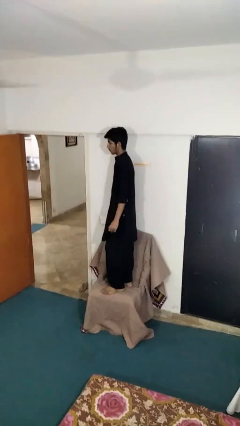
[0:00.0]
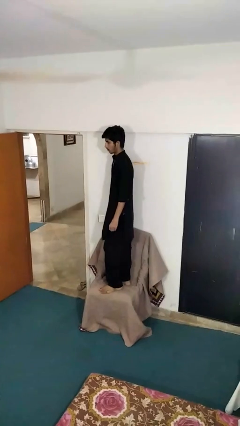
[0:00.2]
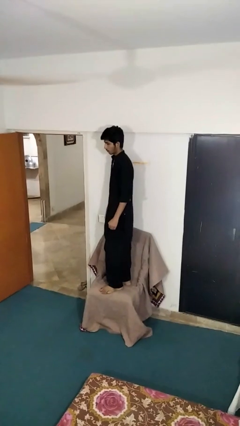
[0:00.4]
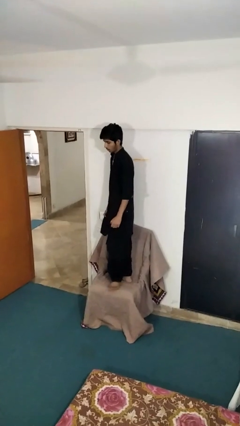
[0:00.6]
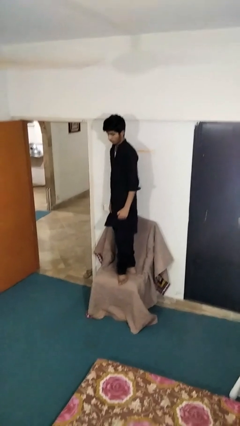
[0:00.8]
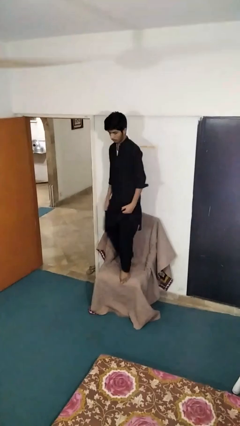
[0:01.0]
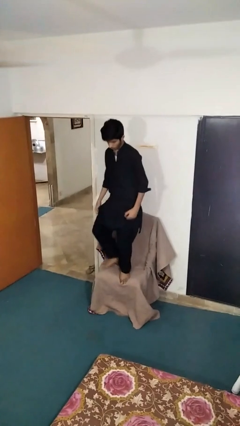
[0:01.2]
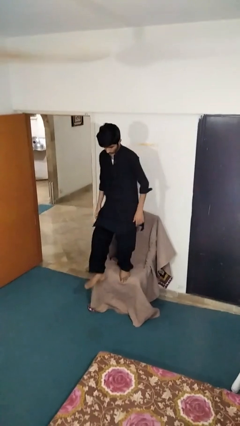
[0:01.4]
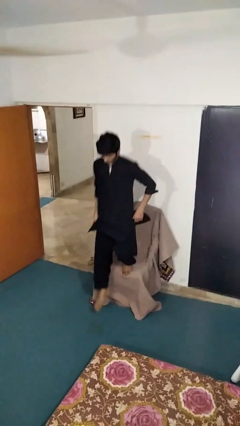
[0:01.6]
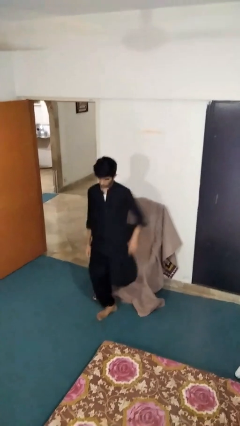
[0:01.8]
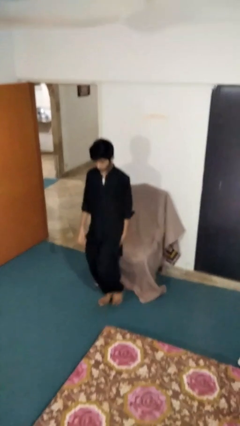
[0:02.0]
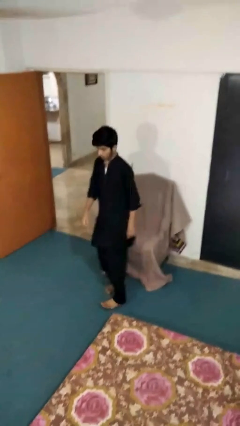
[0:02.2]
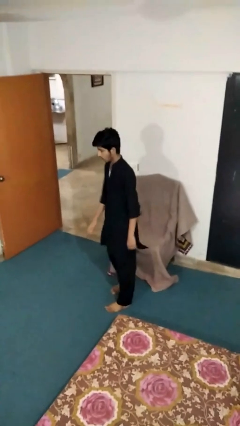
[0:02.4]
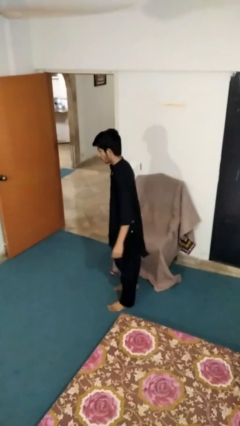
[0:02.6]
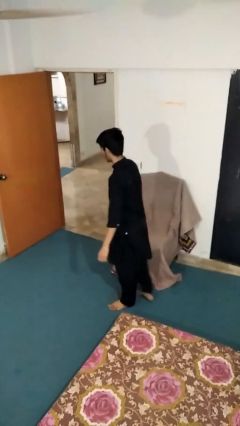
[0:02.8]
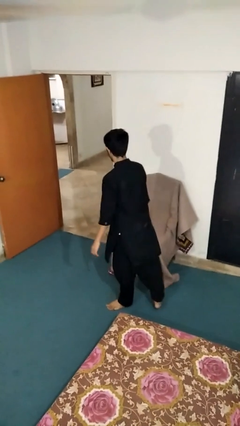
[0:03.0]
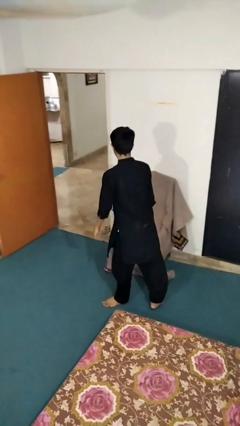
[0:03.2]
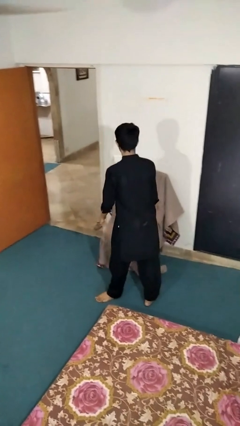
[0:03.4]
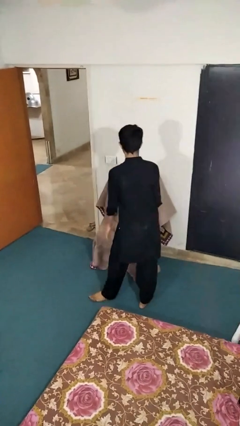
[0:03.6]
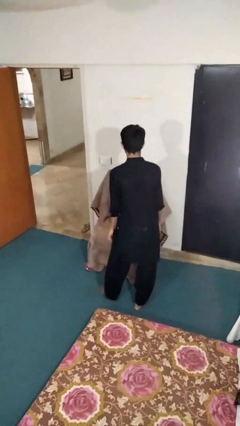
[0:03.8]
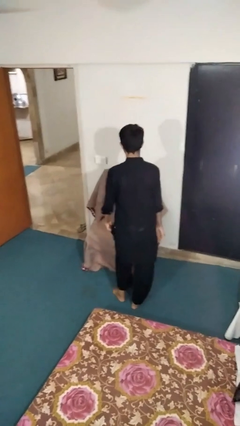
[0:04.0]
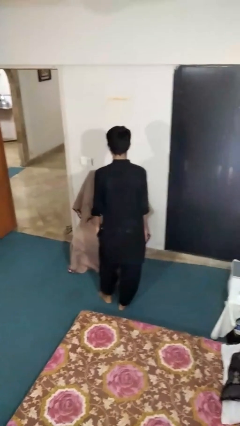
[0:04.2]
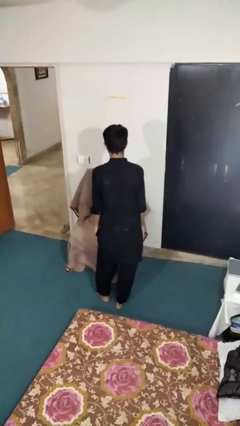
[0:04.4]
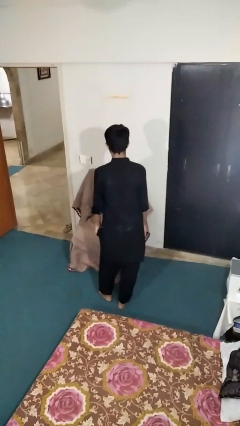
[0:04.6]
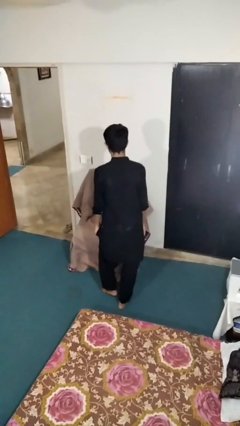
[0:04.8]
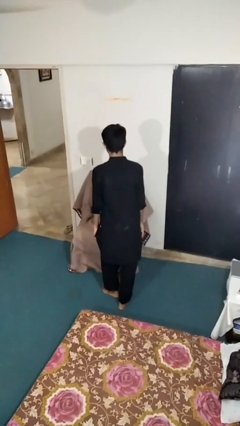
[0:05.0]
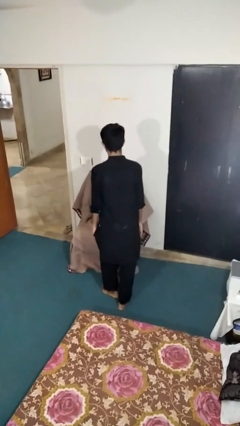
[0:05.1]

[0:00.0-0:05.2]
person climbs off couch

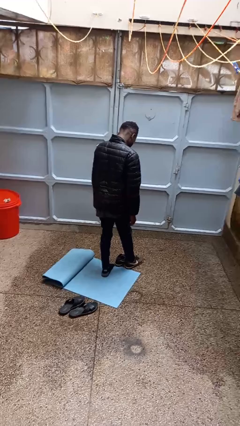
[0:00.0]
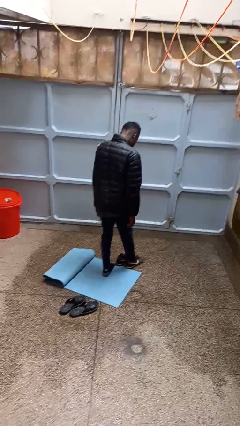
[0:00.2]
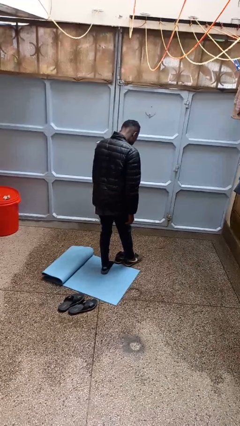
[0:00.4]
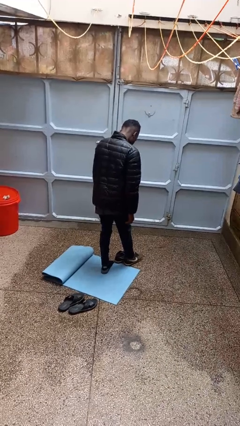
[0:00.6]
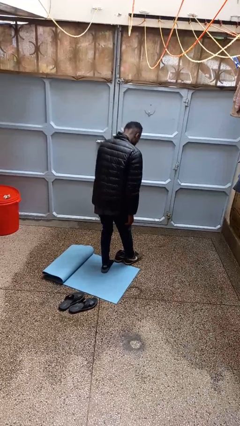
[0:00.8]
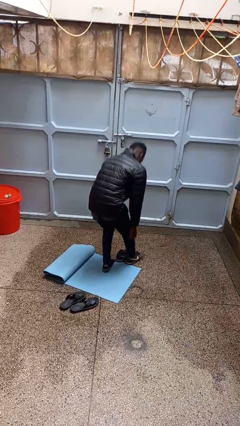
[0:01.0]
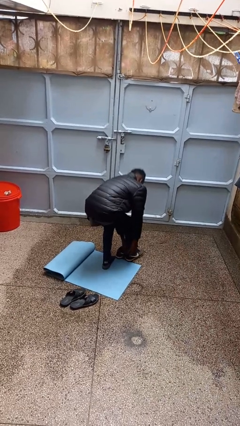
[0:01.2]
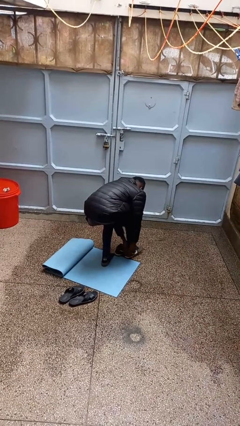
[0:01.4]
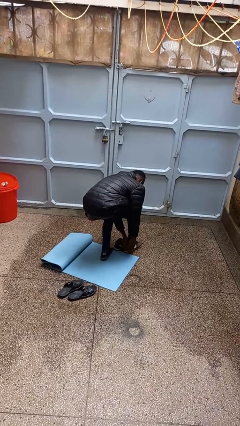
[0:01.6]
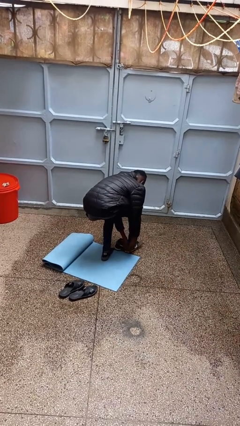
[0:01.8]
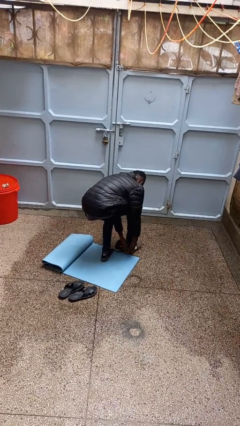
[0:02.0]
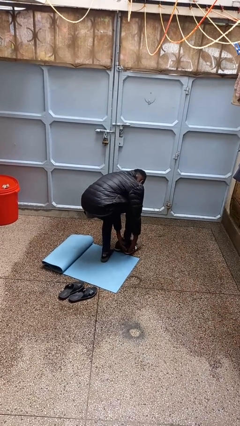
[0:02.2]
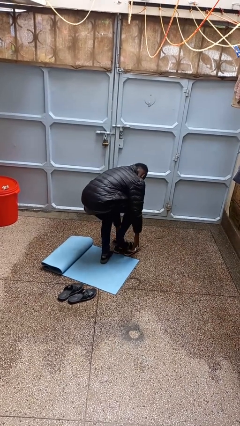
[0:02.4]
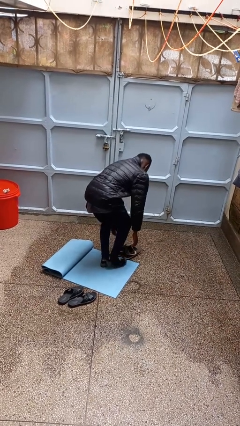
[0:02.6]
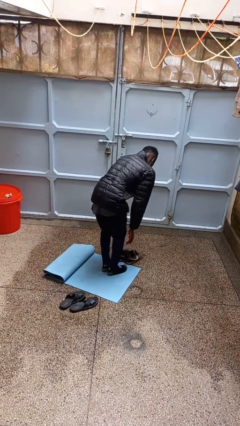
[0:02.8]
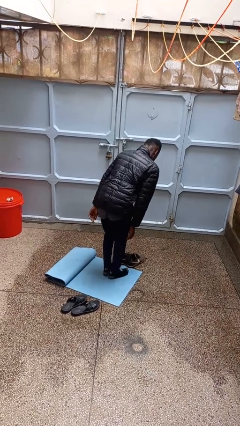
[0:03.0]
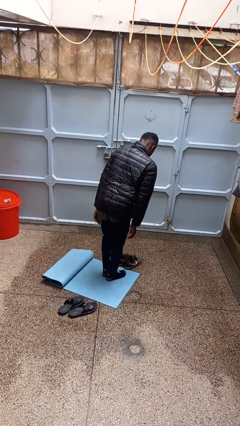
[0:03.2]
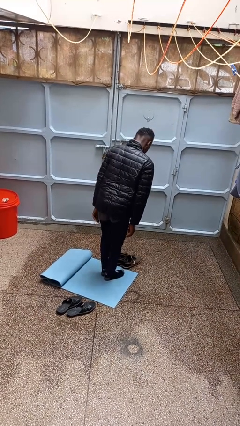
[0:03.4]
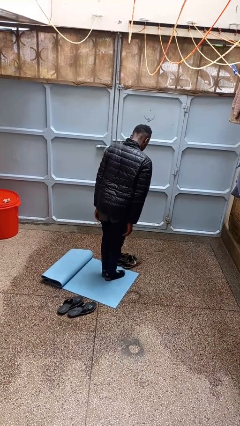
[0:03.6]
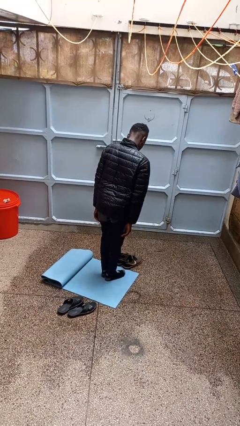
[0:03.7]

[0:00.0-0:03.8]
person takes off shoes

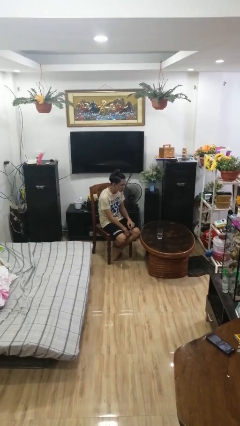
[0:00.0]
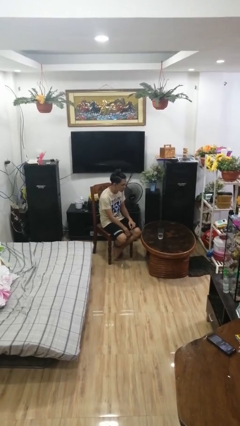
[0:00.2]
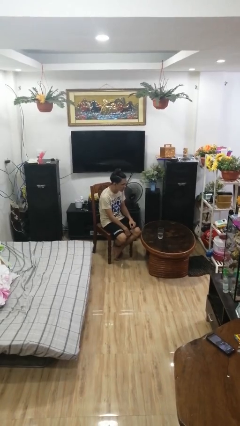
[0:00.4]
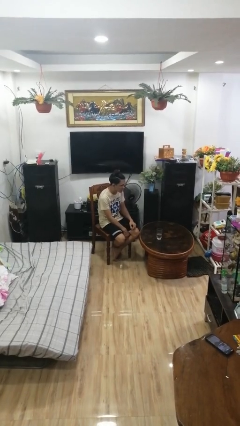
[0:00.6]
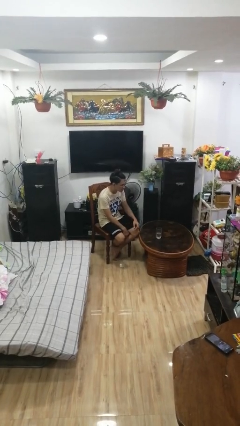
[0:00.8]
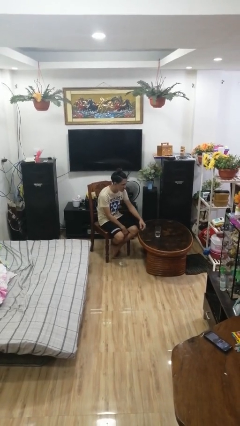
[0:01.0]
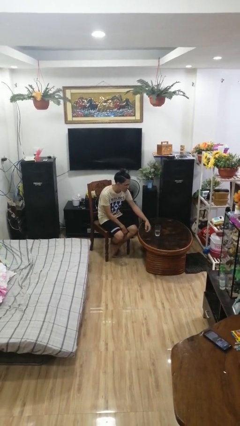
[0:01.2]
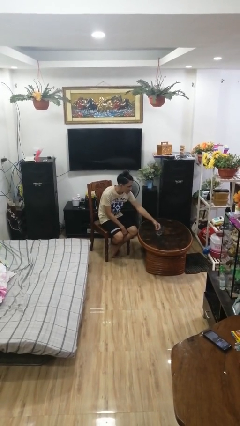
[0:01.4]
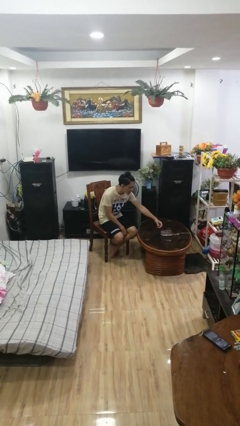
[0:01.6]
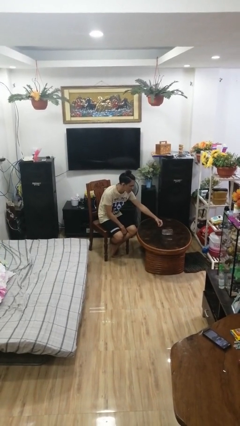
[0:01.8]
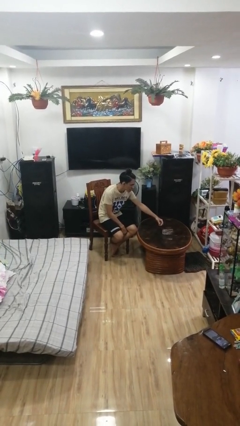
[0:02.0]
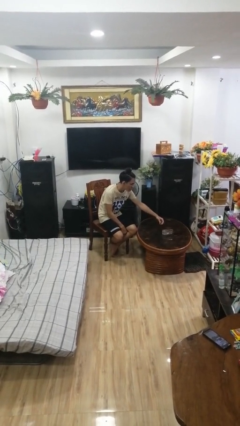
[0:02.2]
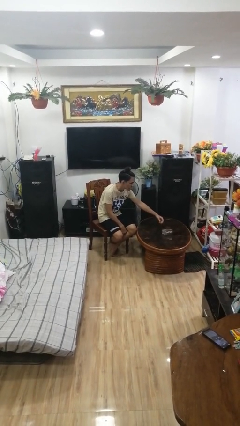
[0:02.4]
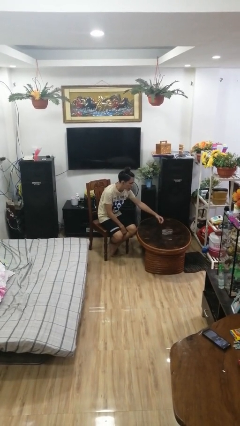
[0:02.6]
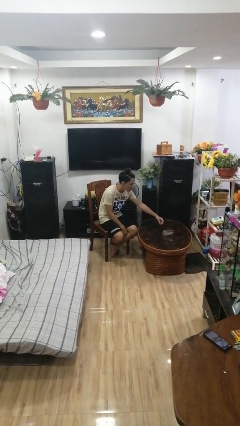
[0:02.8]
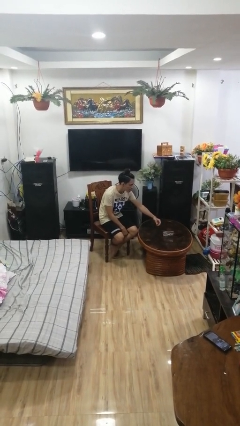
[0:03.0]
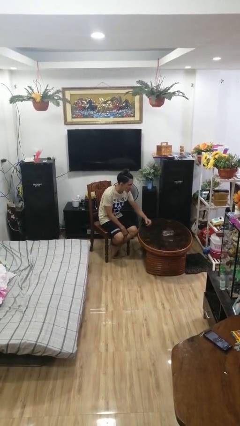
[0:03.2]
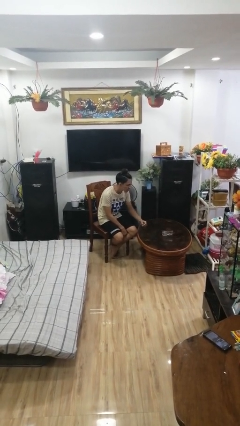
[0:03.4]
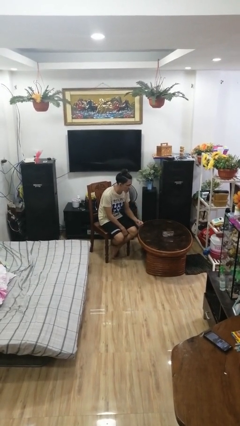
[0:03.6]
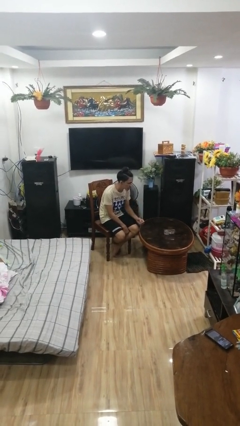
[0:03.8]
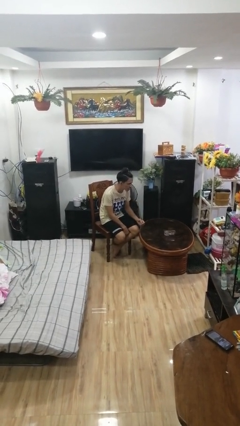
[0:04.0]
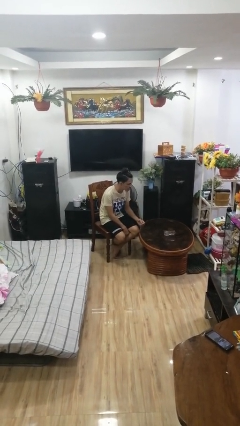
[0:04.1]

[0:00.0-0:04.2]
person spills on table

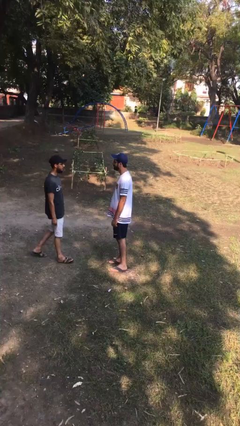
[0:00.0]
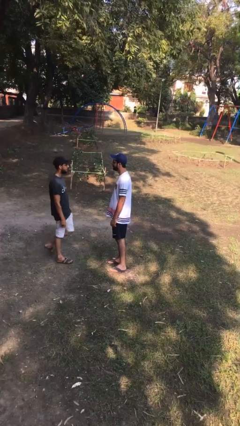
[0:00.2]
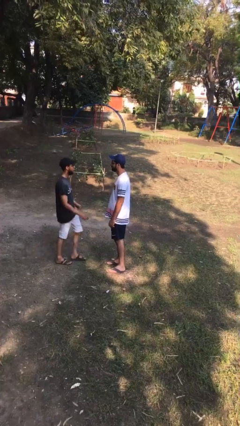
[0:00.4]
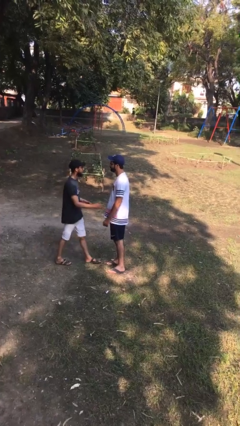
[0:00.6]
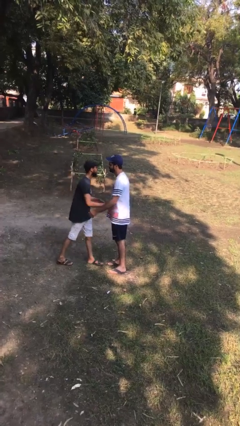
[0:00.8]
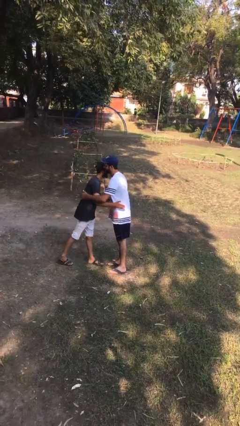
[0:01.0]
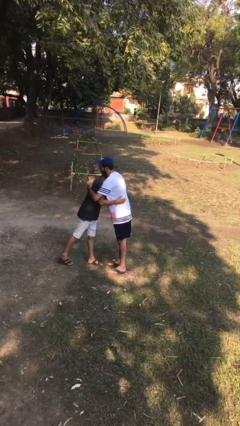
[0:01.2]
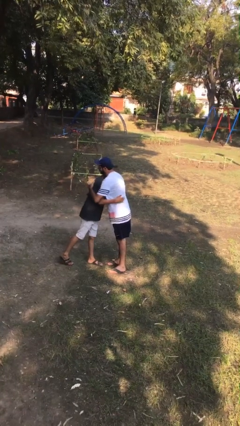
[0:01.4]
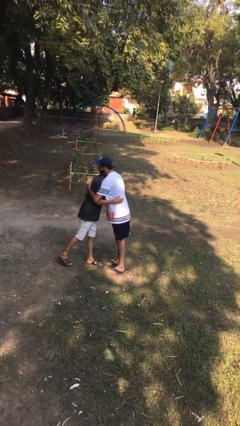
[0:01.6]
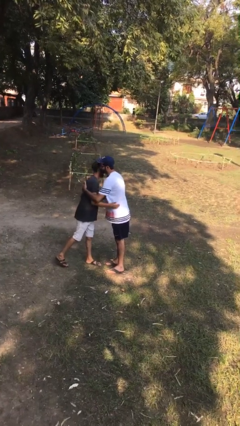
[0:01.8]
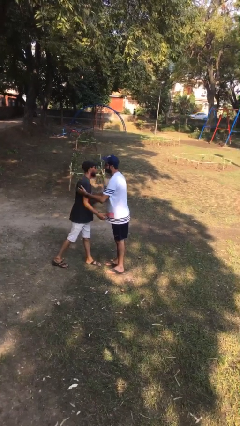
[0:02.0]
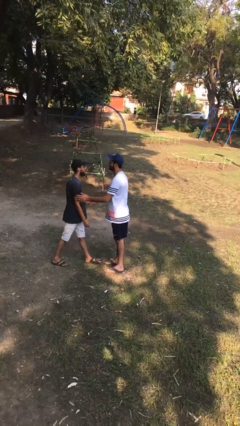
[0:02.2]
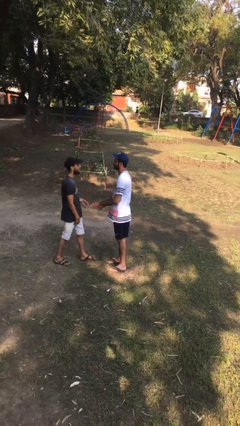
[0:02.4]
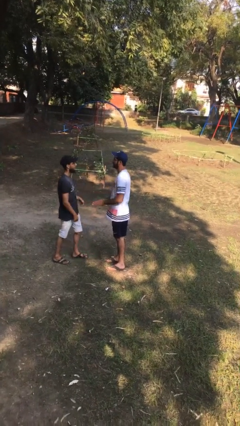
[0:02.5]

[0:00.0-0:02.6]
person embraces person

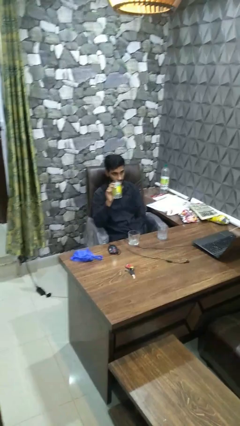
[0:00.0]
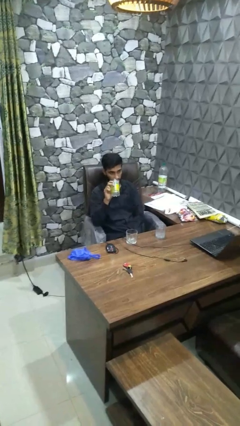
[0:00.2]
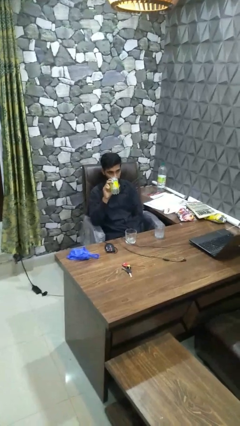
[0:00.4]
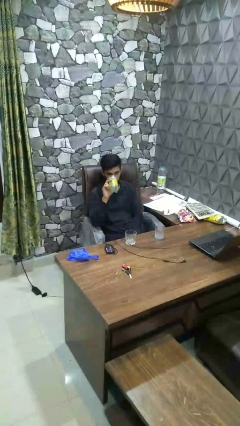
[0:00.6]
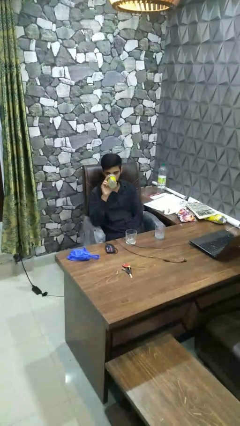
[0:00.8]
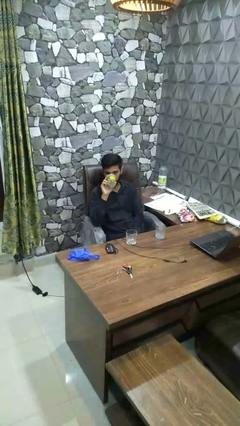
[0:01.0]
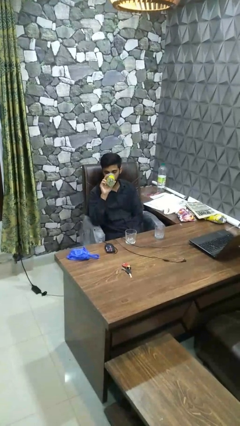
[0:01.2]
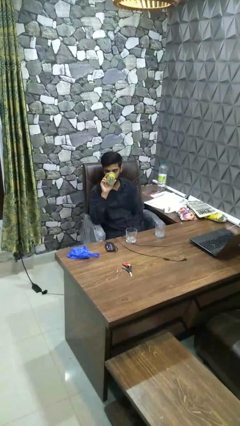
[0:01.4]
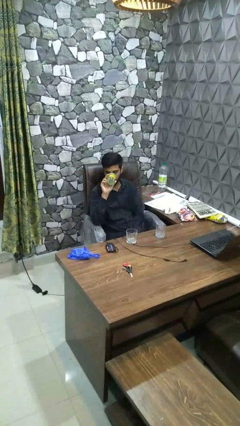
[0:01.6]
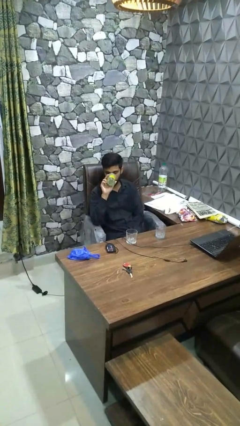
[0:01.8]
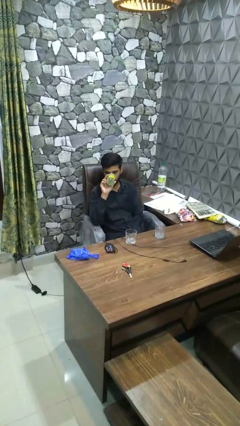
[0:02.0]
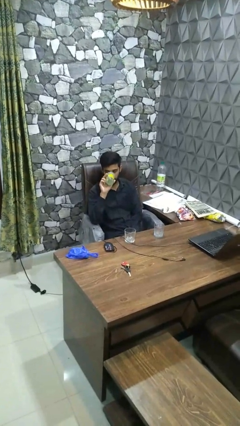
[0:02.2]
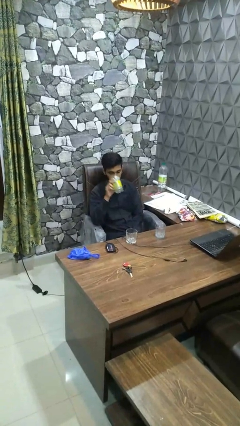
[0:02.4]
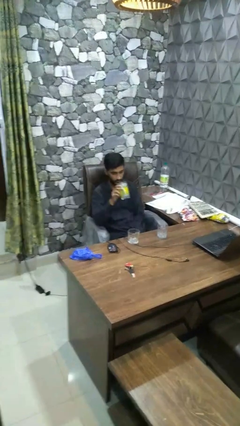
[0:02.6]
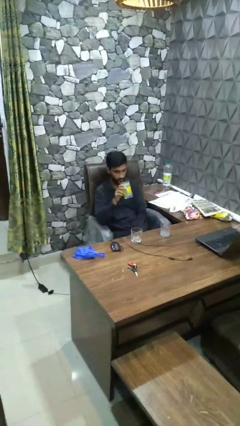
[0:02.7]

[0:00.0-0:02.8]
person drinks from shotglass
